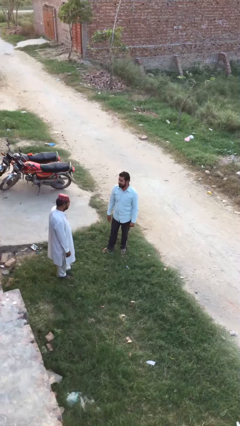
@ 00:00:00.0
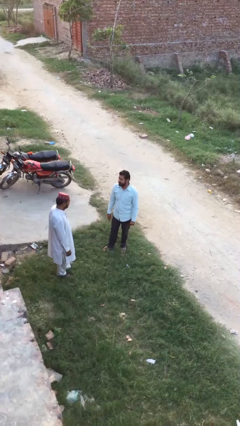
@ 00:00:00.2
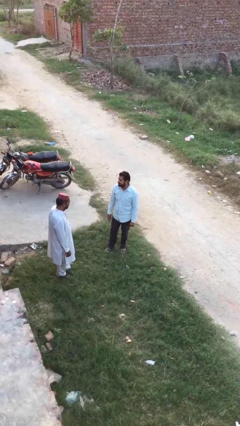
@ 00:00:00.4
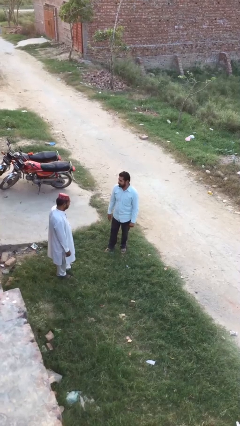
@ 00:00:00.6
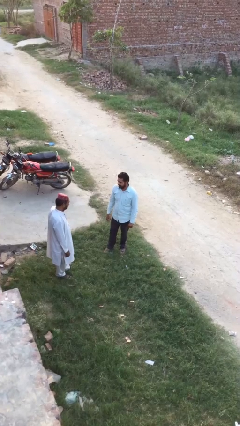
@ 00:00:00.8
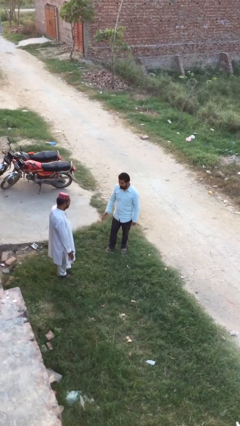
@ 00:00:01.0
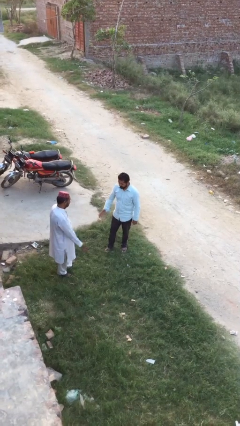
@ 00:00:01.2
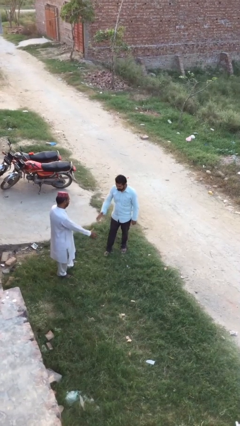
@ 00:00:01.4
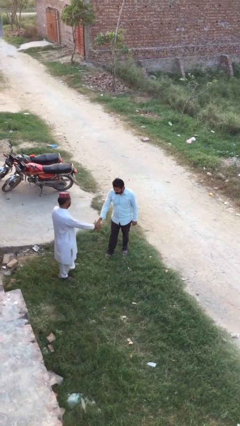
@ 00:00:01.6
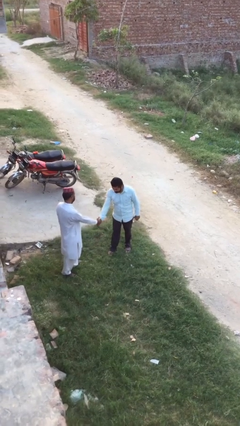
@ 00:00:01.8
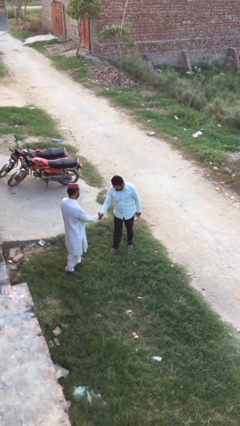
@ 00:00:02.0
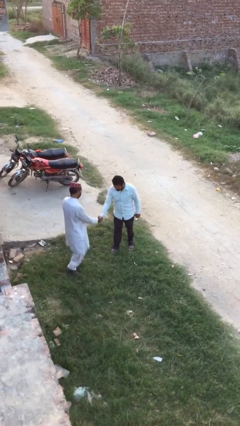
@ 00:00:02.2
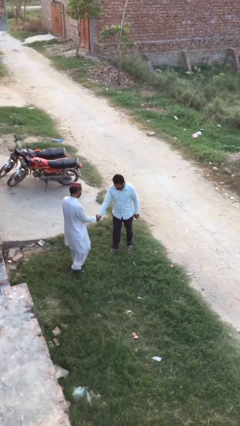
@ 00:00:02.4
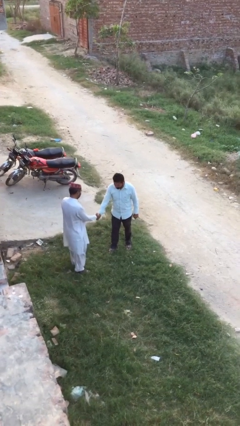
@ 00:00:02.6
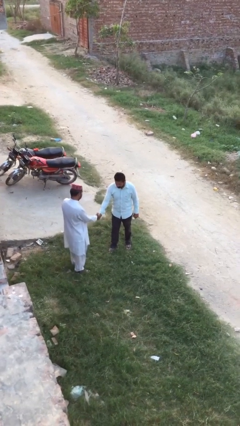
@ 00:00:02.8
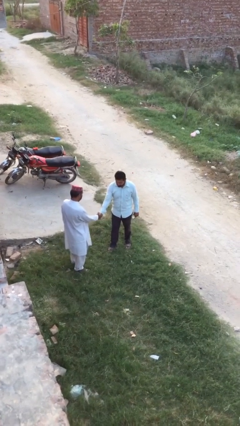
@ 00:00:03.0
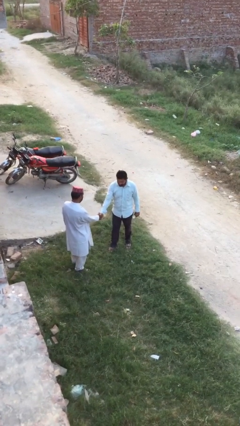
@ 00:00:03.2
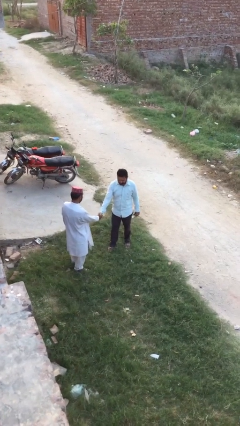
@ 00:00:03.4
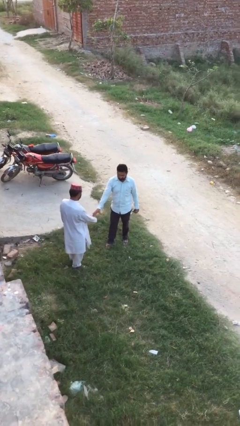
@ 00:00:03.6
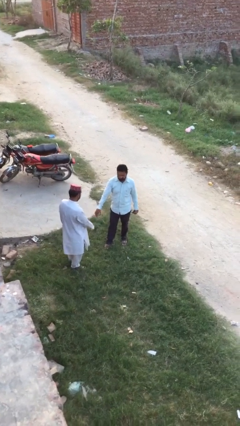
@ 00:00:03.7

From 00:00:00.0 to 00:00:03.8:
person shakes hand

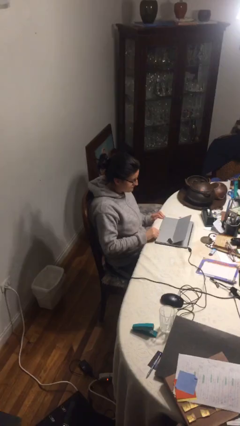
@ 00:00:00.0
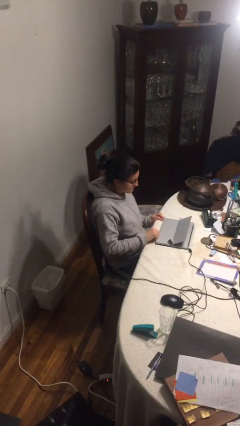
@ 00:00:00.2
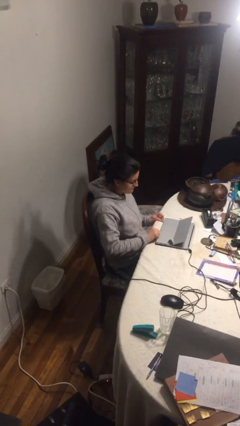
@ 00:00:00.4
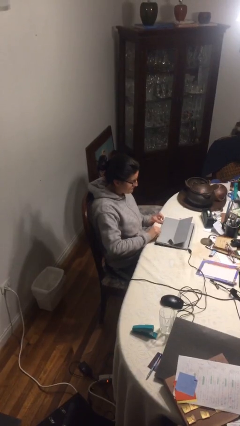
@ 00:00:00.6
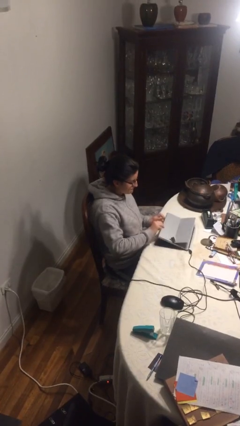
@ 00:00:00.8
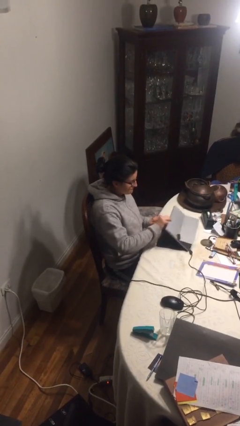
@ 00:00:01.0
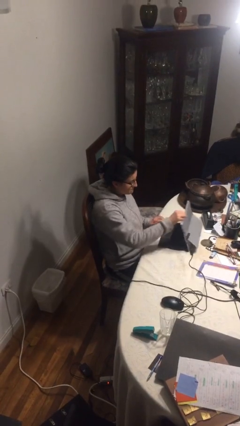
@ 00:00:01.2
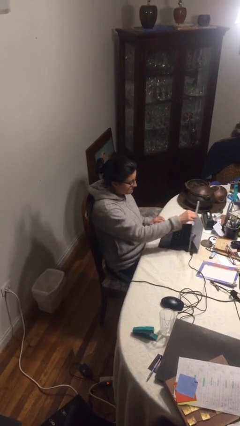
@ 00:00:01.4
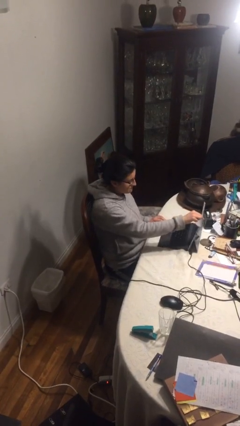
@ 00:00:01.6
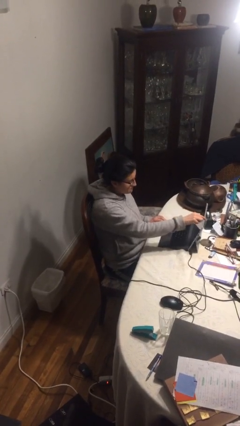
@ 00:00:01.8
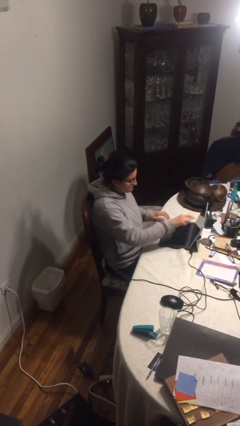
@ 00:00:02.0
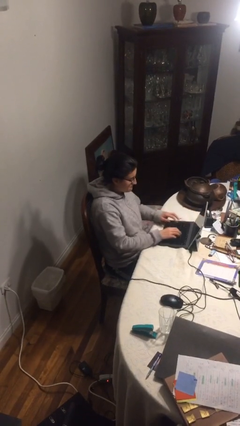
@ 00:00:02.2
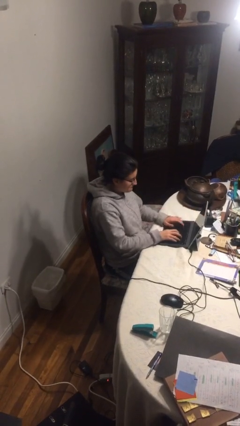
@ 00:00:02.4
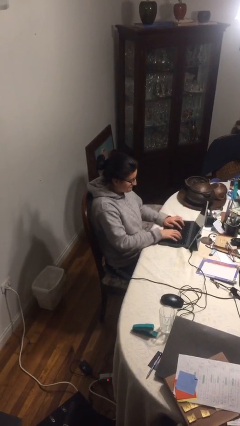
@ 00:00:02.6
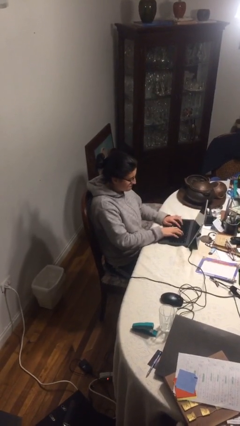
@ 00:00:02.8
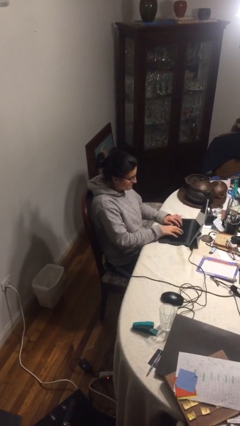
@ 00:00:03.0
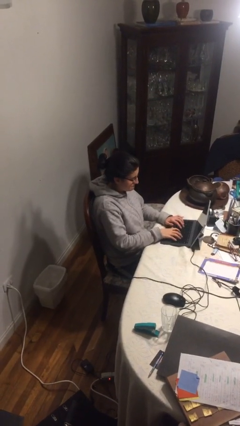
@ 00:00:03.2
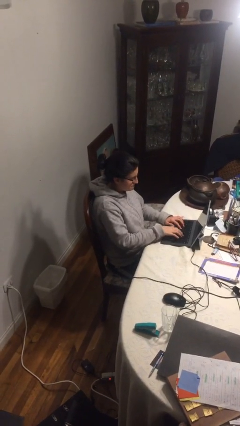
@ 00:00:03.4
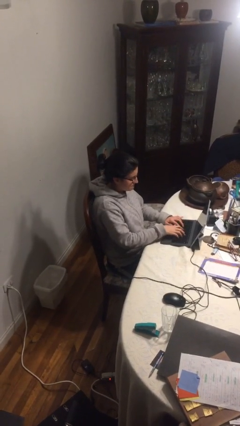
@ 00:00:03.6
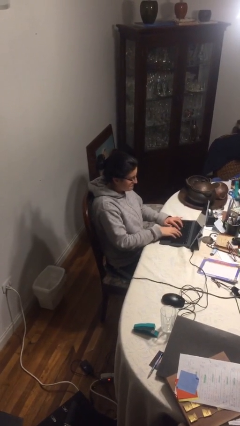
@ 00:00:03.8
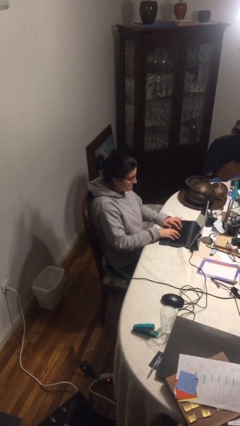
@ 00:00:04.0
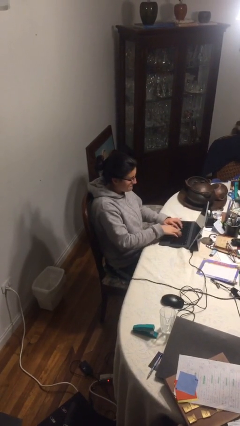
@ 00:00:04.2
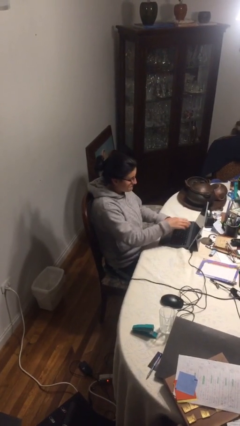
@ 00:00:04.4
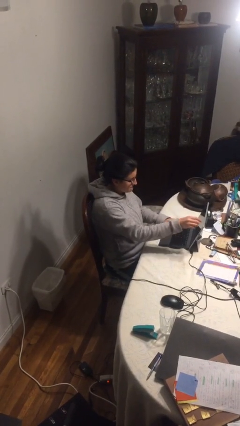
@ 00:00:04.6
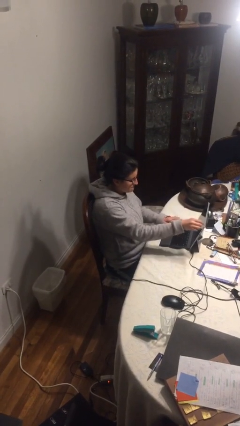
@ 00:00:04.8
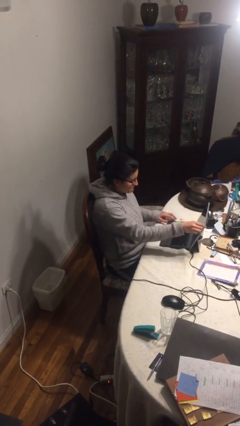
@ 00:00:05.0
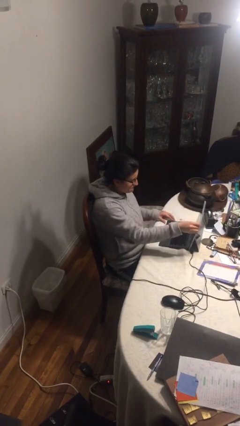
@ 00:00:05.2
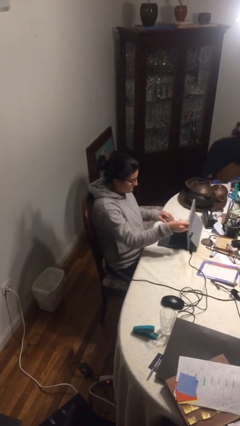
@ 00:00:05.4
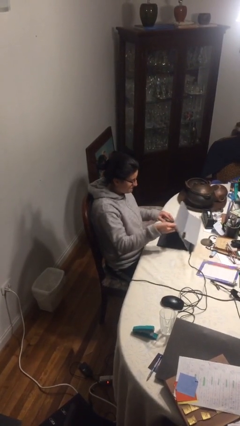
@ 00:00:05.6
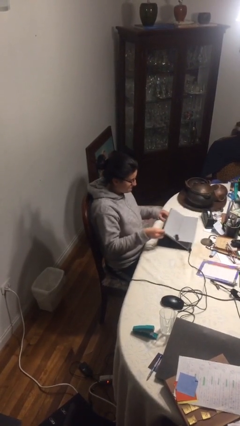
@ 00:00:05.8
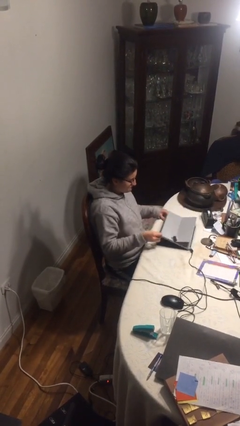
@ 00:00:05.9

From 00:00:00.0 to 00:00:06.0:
person interacts with laptop

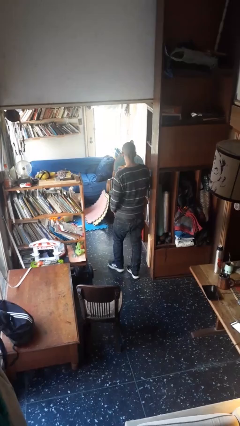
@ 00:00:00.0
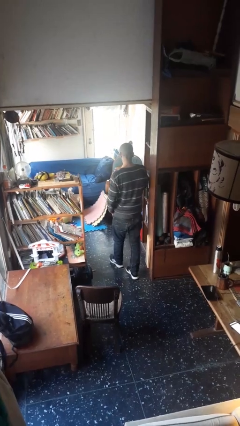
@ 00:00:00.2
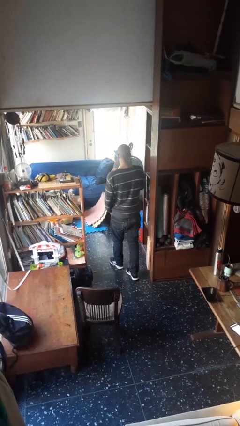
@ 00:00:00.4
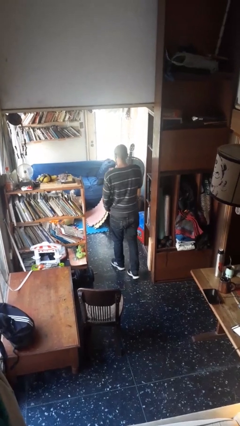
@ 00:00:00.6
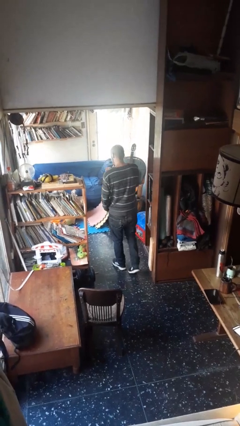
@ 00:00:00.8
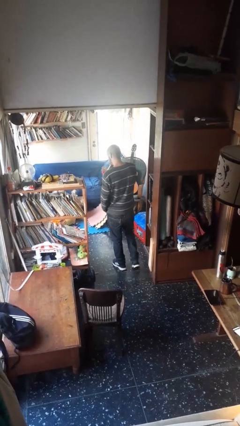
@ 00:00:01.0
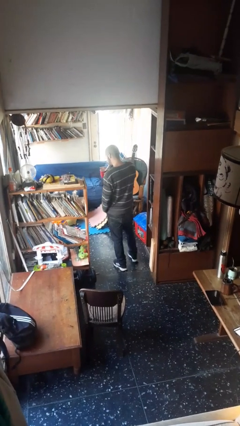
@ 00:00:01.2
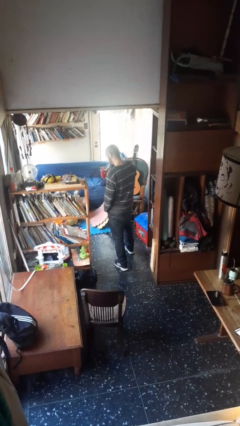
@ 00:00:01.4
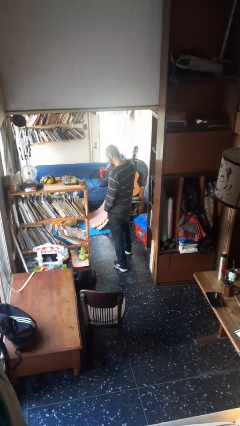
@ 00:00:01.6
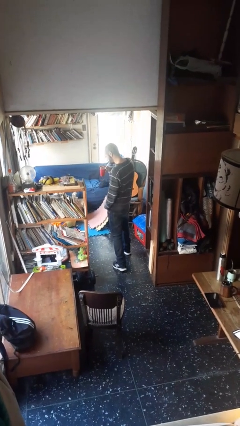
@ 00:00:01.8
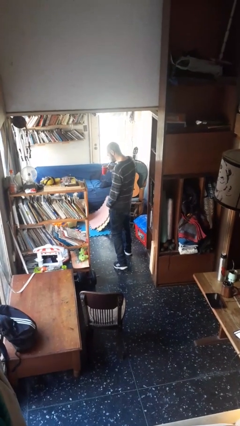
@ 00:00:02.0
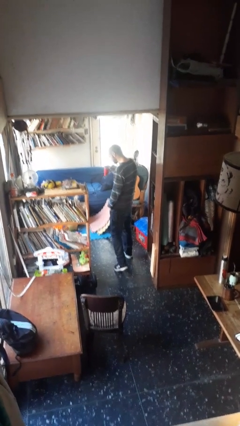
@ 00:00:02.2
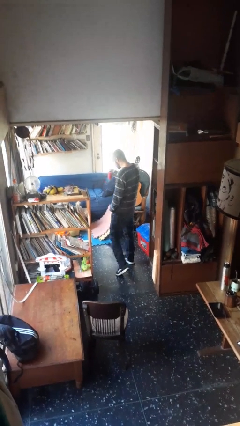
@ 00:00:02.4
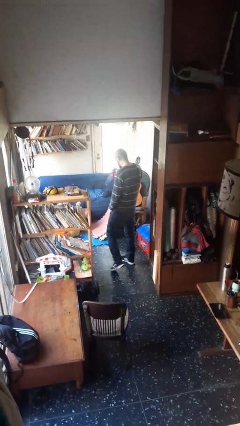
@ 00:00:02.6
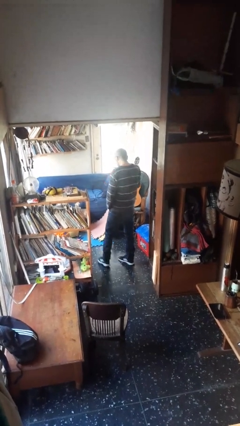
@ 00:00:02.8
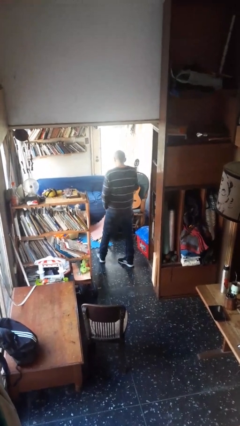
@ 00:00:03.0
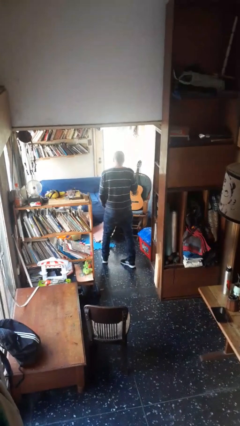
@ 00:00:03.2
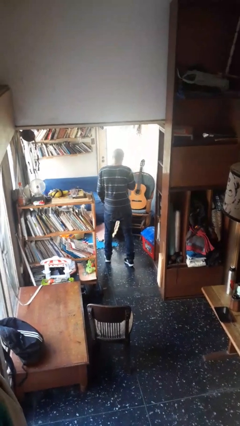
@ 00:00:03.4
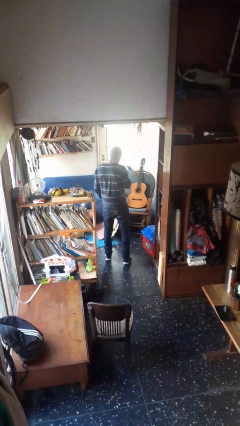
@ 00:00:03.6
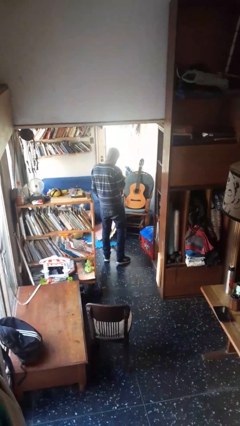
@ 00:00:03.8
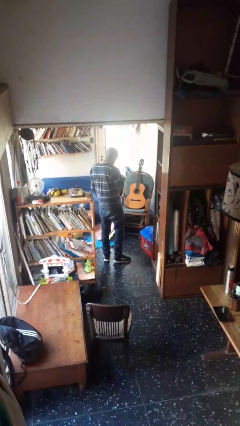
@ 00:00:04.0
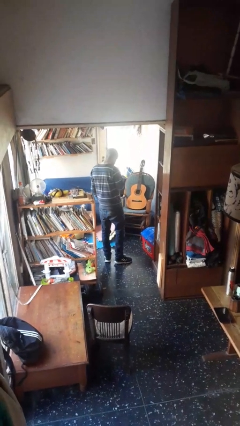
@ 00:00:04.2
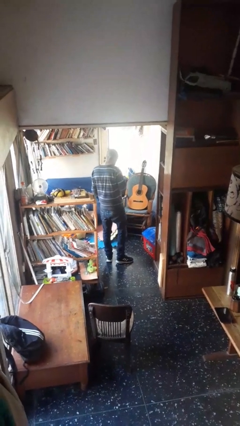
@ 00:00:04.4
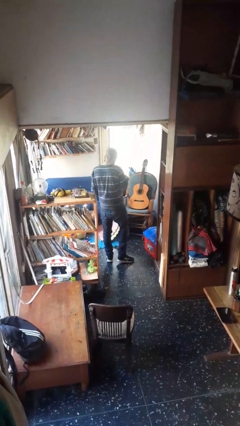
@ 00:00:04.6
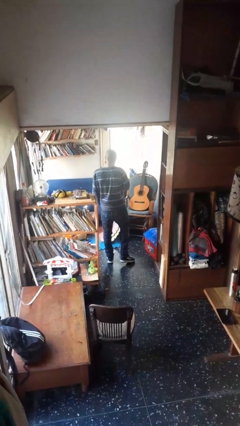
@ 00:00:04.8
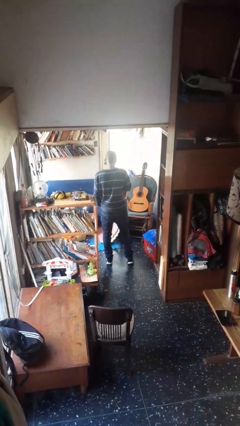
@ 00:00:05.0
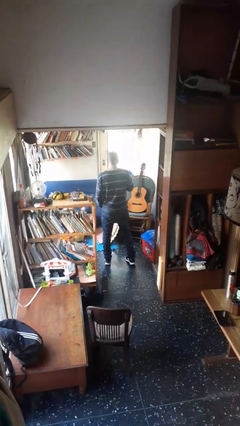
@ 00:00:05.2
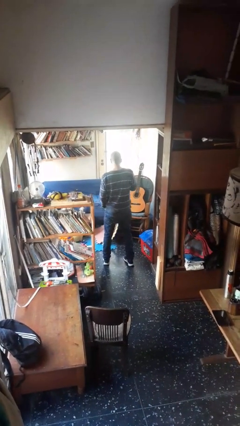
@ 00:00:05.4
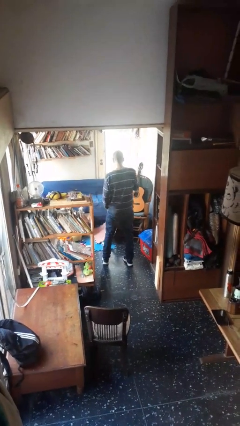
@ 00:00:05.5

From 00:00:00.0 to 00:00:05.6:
person drinks from straw

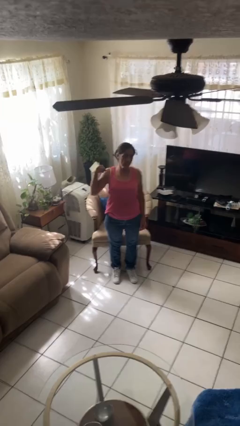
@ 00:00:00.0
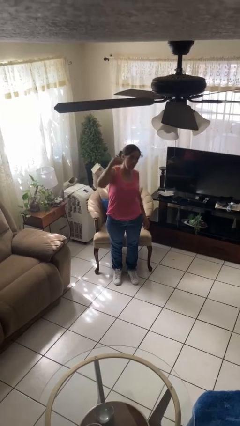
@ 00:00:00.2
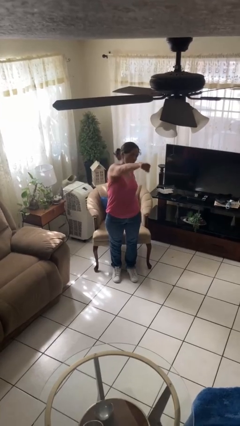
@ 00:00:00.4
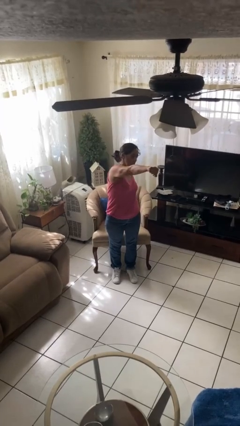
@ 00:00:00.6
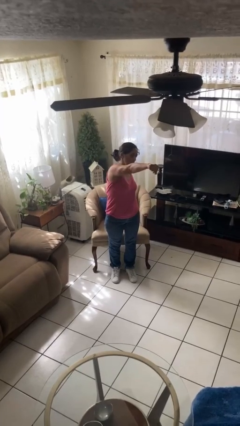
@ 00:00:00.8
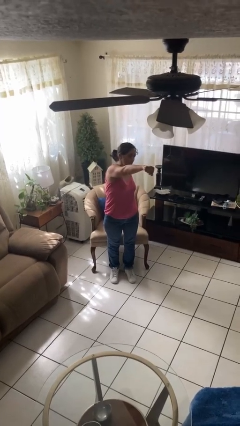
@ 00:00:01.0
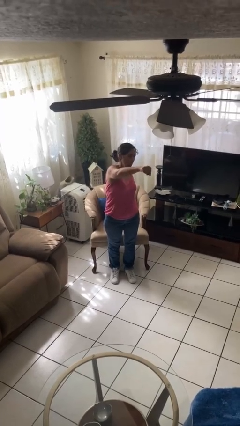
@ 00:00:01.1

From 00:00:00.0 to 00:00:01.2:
person punches

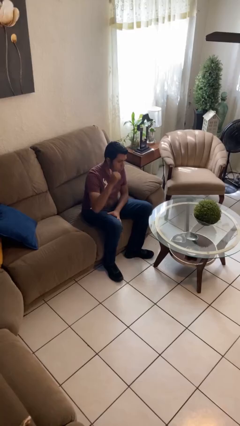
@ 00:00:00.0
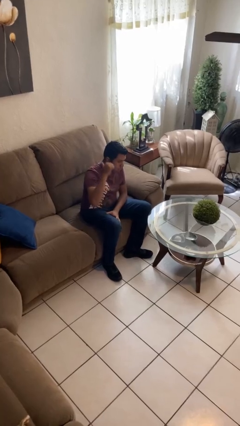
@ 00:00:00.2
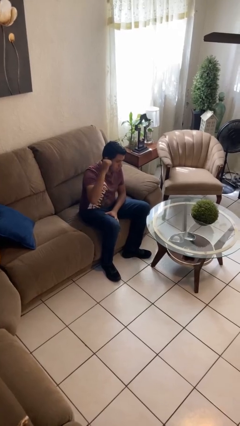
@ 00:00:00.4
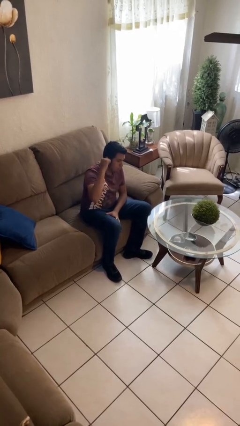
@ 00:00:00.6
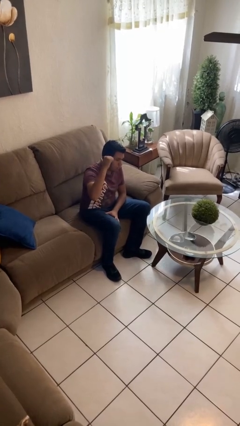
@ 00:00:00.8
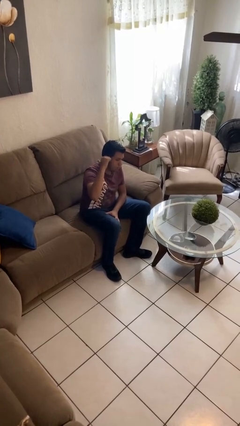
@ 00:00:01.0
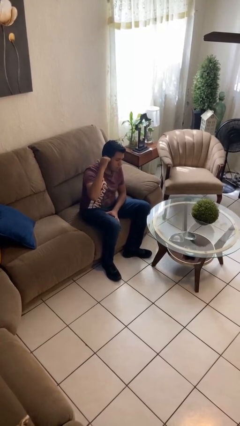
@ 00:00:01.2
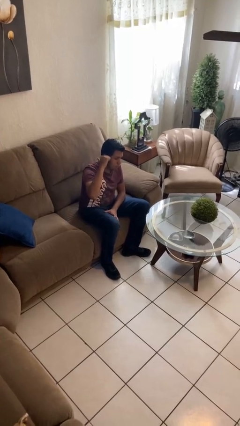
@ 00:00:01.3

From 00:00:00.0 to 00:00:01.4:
person gestures behind me
